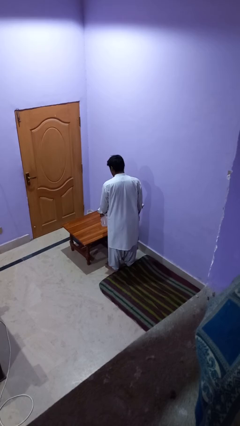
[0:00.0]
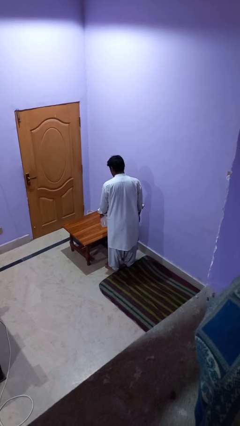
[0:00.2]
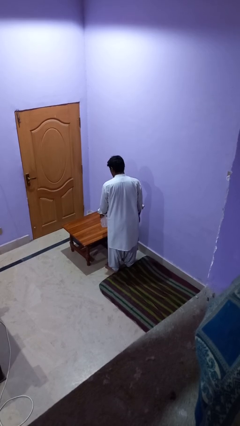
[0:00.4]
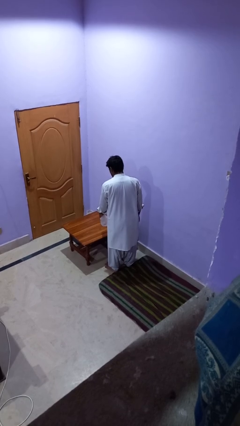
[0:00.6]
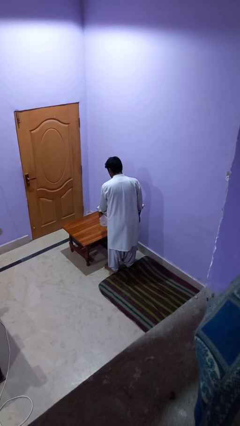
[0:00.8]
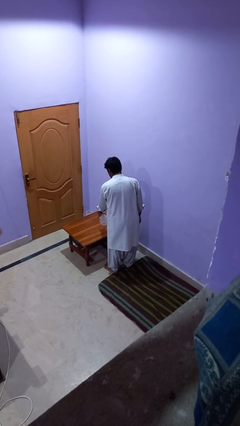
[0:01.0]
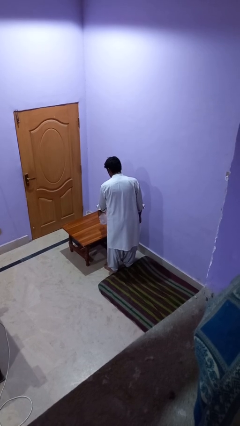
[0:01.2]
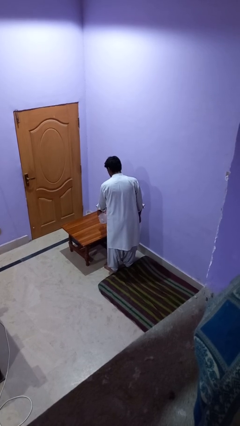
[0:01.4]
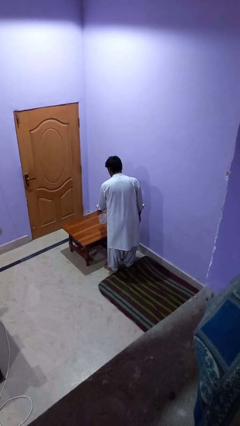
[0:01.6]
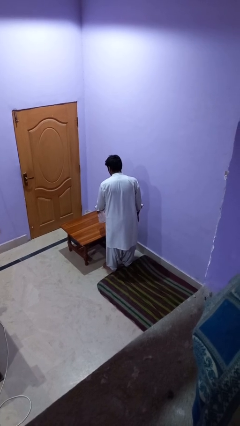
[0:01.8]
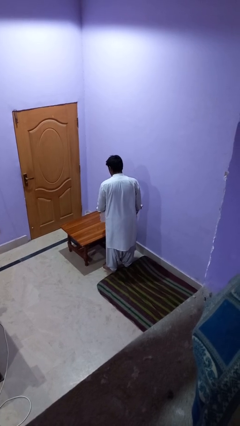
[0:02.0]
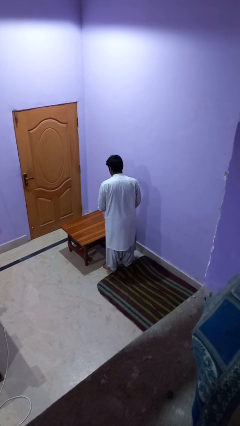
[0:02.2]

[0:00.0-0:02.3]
person sprays from bottle

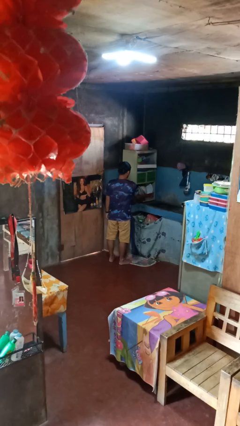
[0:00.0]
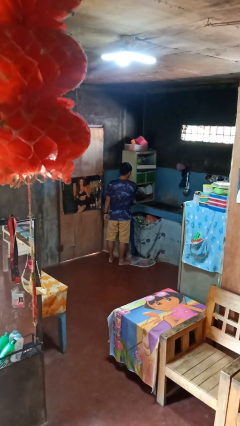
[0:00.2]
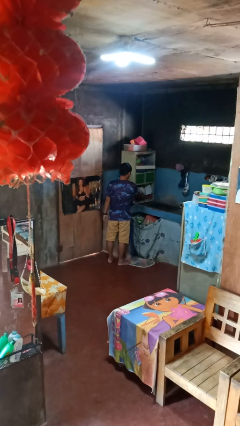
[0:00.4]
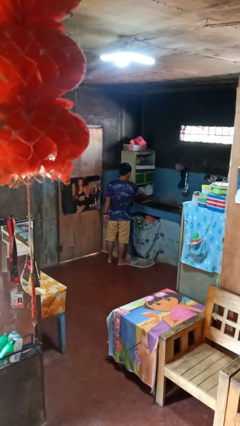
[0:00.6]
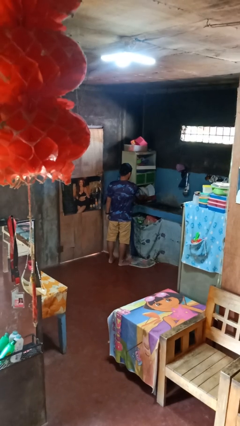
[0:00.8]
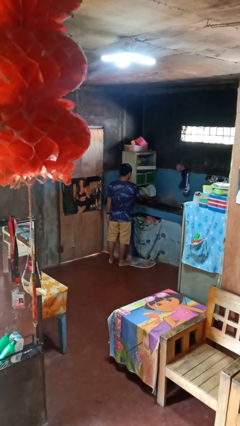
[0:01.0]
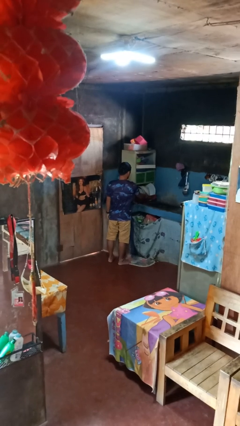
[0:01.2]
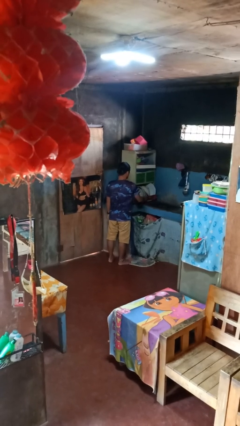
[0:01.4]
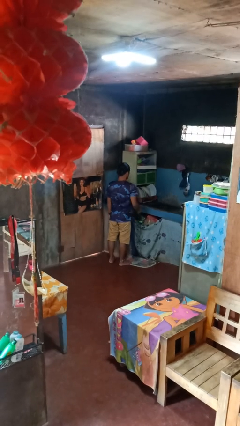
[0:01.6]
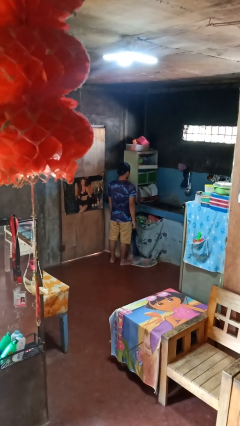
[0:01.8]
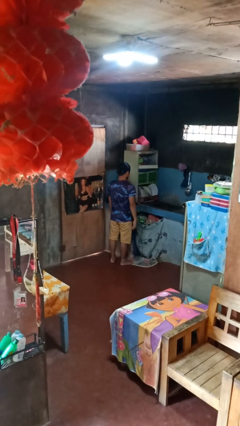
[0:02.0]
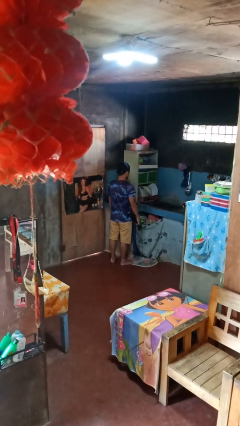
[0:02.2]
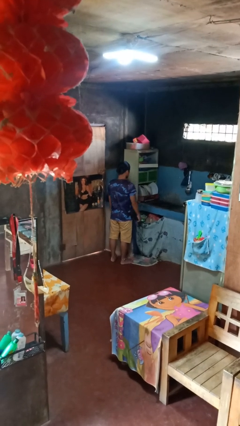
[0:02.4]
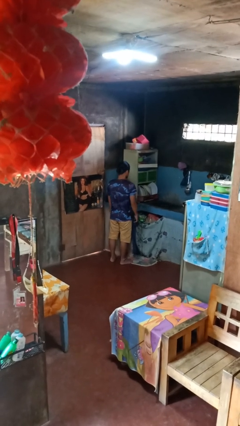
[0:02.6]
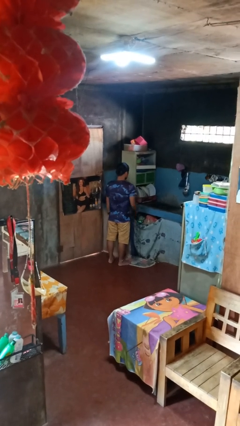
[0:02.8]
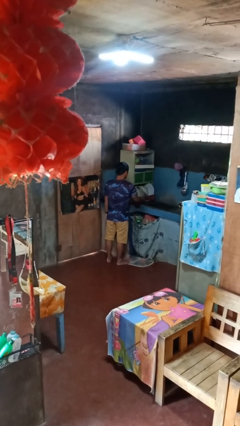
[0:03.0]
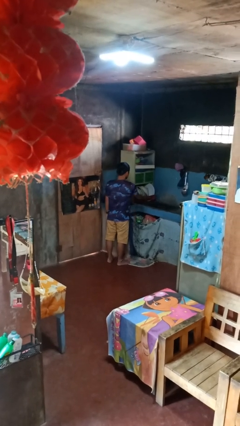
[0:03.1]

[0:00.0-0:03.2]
person opens dishwasher

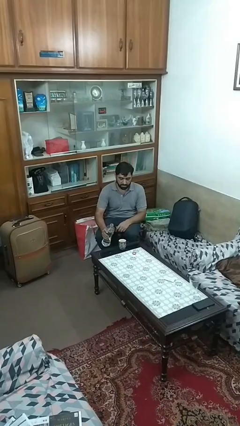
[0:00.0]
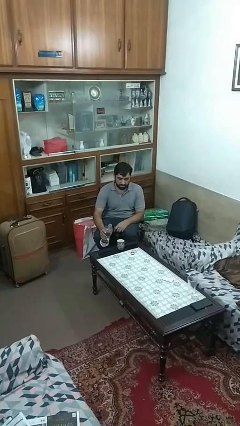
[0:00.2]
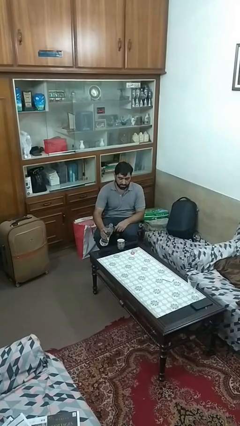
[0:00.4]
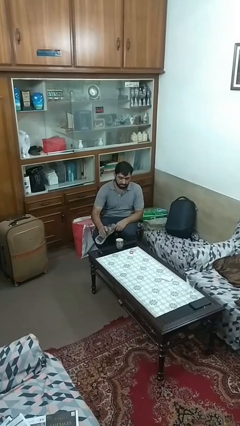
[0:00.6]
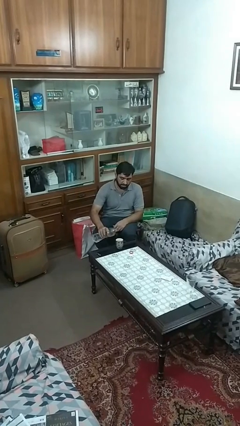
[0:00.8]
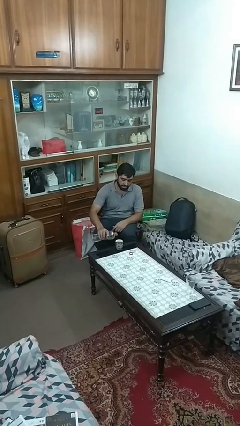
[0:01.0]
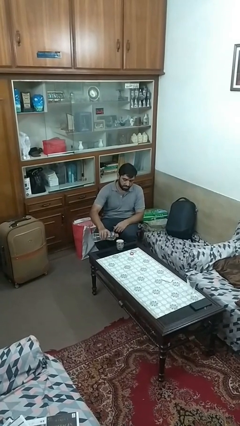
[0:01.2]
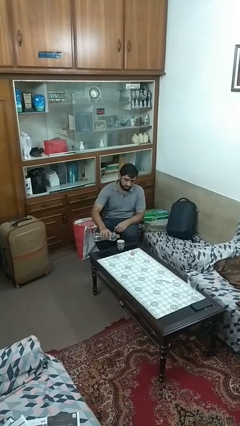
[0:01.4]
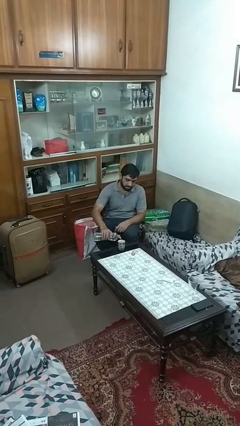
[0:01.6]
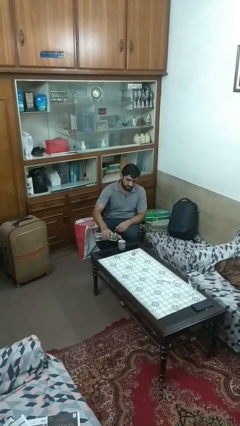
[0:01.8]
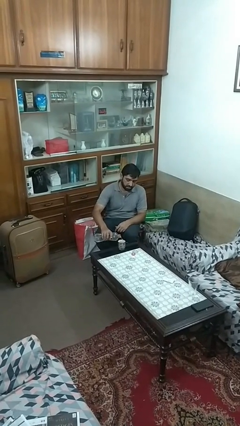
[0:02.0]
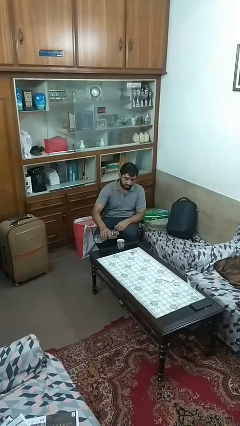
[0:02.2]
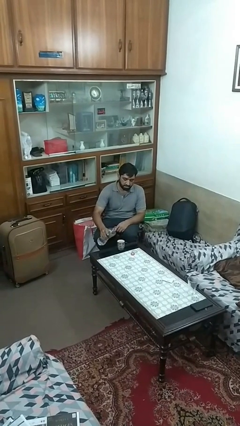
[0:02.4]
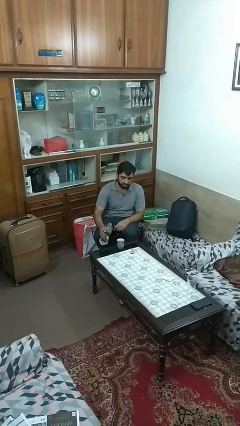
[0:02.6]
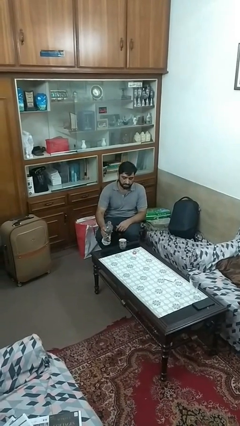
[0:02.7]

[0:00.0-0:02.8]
person pours liquid into cup

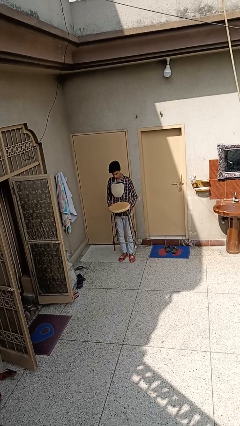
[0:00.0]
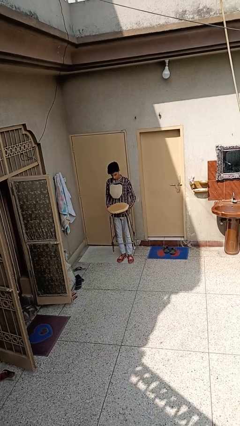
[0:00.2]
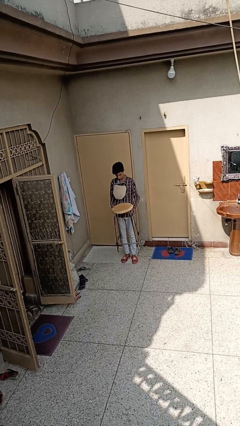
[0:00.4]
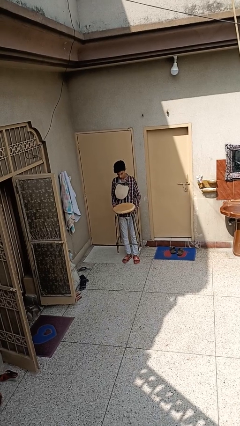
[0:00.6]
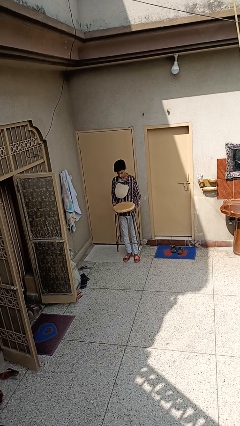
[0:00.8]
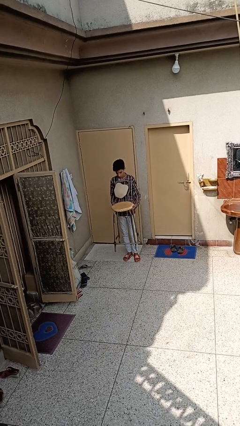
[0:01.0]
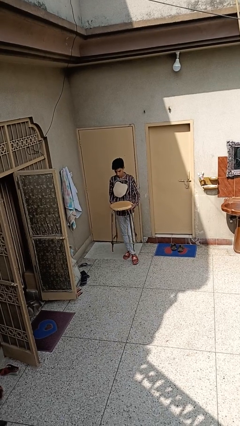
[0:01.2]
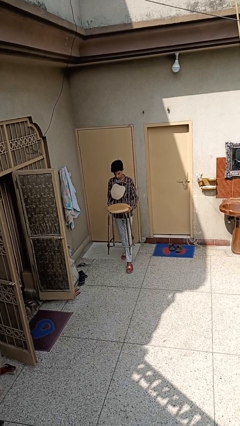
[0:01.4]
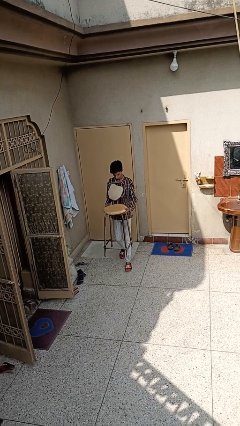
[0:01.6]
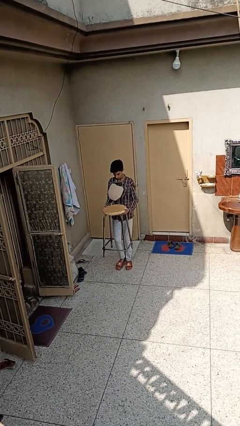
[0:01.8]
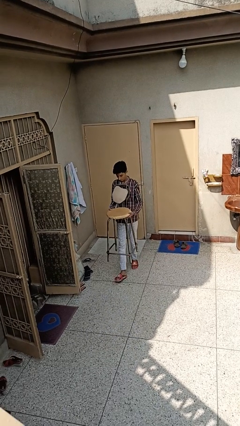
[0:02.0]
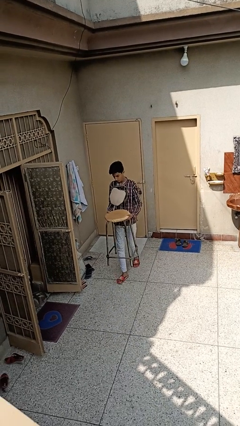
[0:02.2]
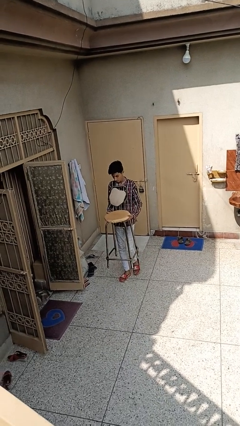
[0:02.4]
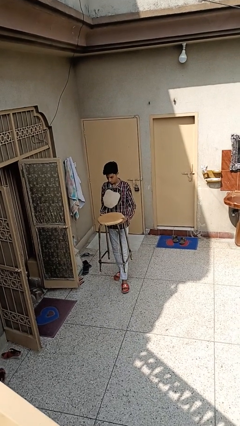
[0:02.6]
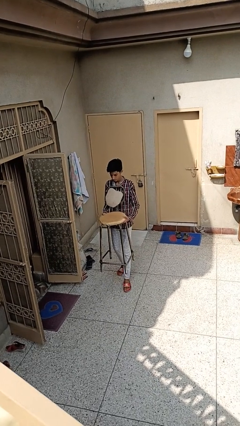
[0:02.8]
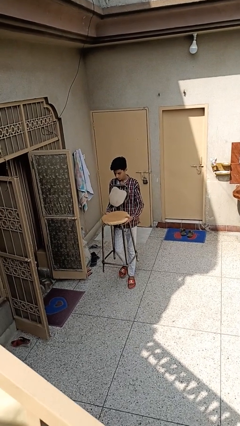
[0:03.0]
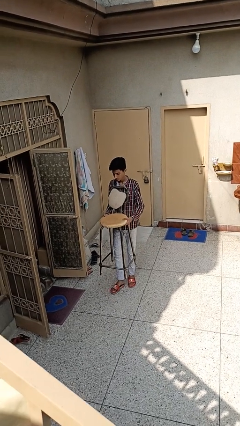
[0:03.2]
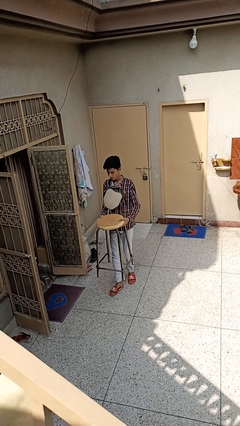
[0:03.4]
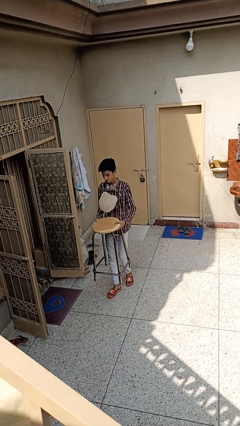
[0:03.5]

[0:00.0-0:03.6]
person carries furniture

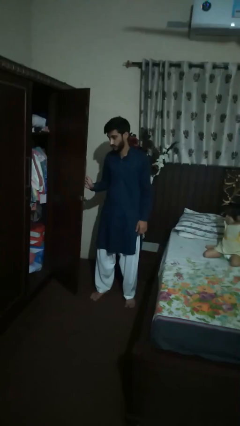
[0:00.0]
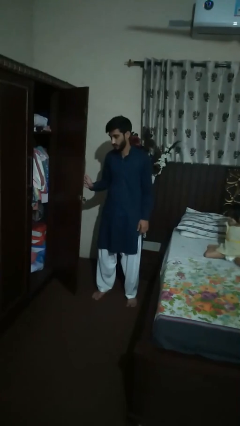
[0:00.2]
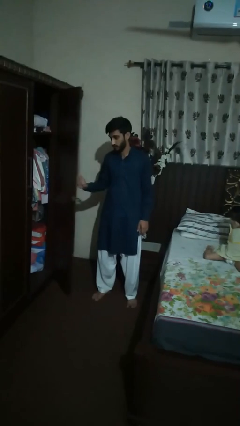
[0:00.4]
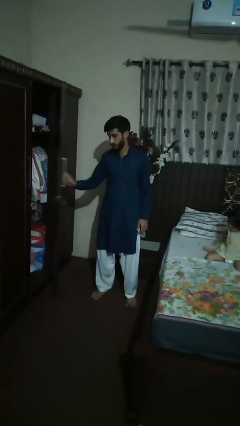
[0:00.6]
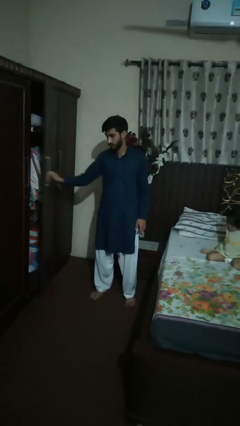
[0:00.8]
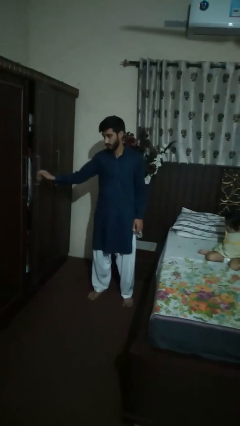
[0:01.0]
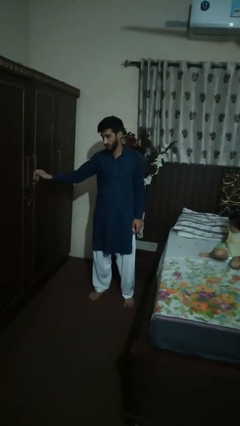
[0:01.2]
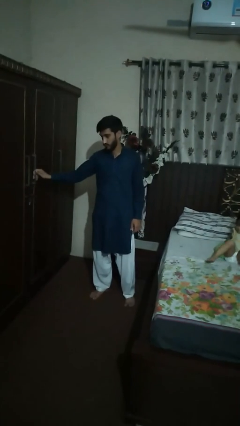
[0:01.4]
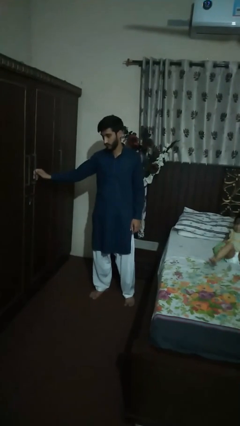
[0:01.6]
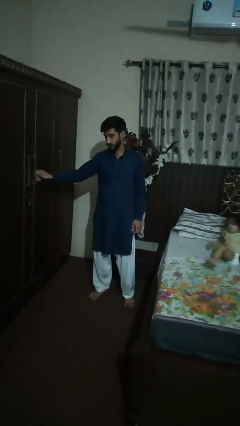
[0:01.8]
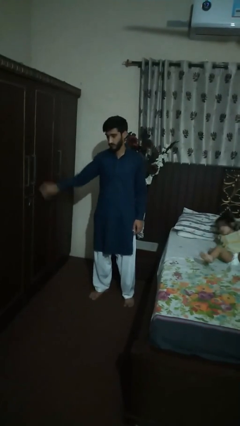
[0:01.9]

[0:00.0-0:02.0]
person closes dresser drawer

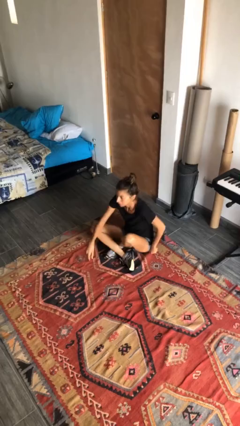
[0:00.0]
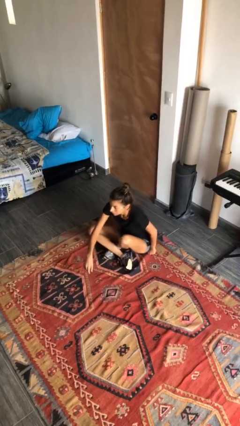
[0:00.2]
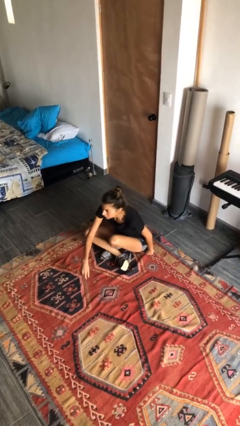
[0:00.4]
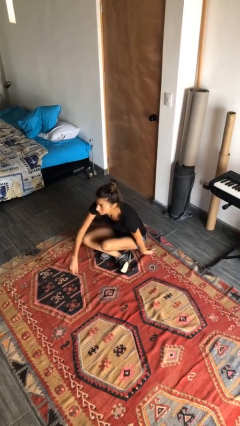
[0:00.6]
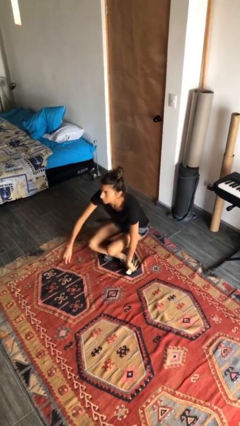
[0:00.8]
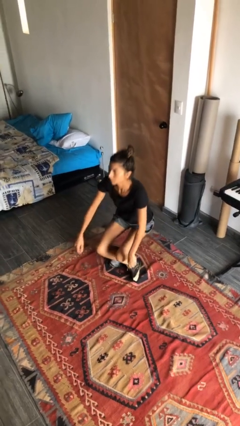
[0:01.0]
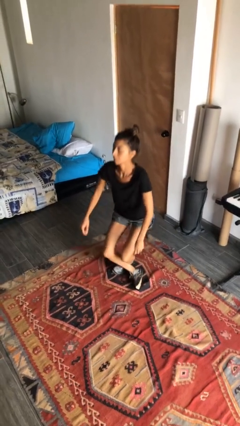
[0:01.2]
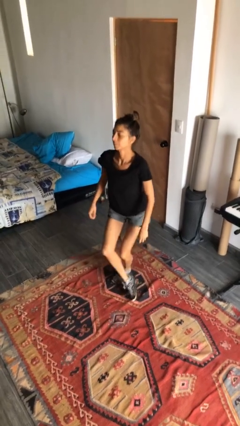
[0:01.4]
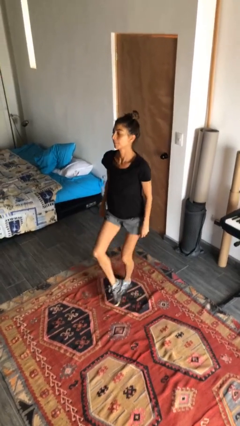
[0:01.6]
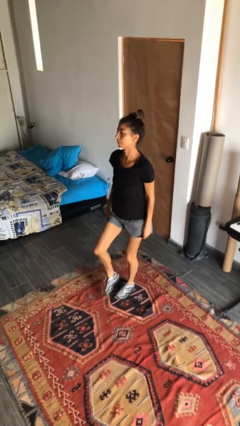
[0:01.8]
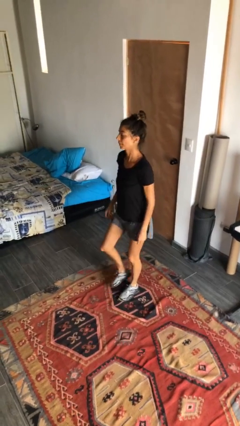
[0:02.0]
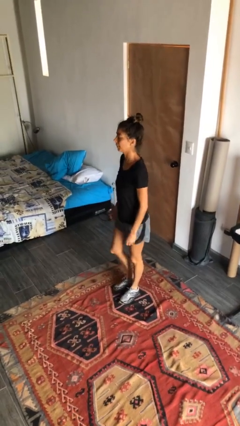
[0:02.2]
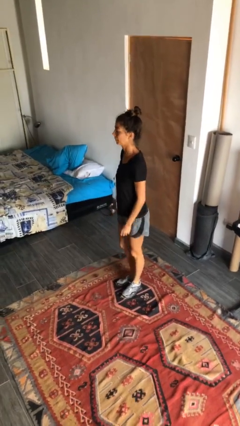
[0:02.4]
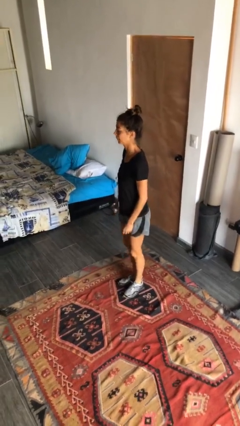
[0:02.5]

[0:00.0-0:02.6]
person stands up from floor

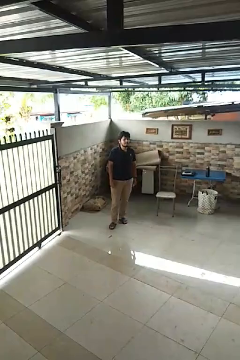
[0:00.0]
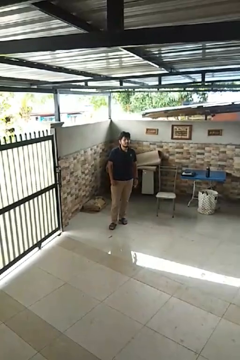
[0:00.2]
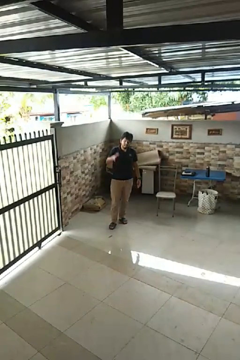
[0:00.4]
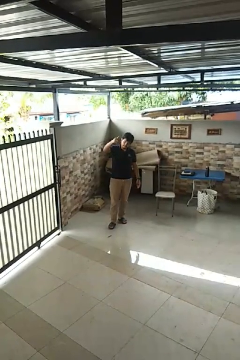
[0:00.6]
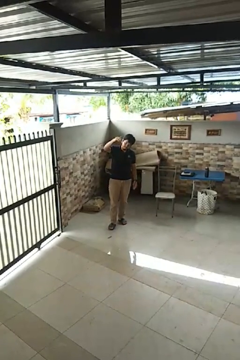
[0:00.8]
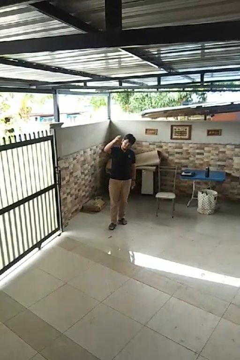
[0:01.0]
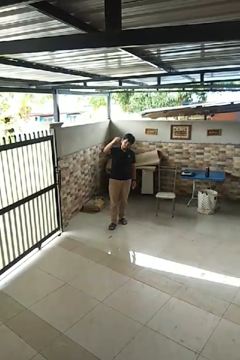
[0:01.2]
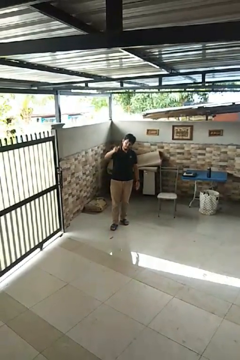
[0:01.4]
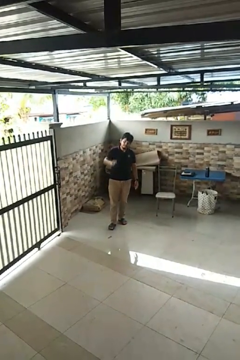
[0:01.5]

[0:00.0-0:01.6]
person gestures come here
